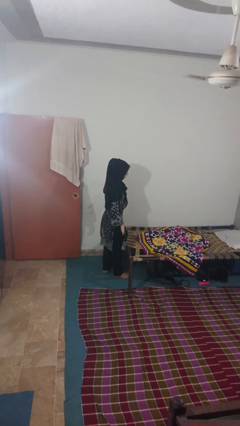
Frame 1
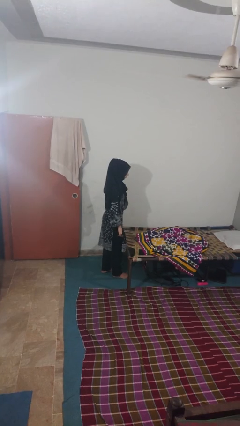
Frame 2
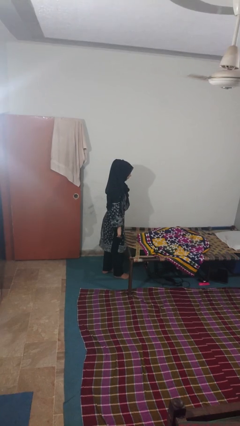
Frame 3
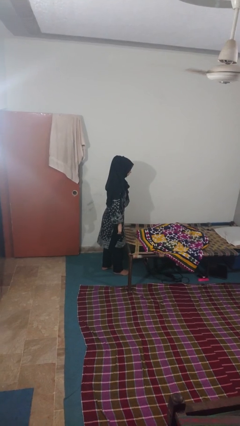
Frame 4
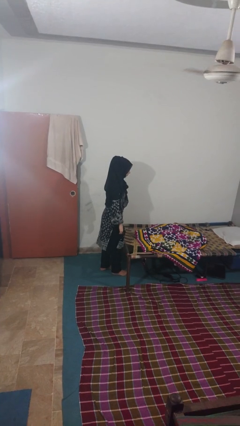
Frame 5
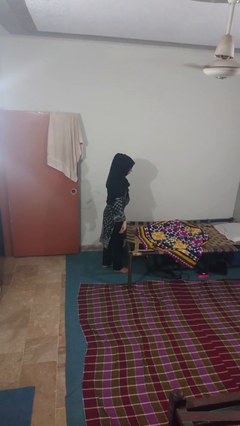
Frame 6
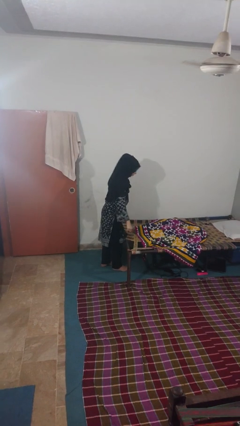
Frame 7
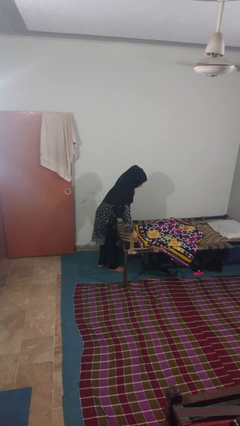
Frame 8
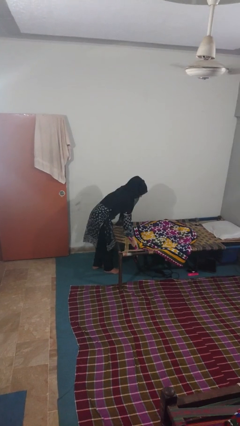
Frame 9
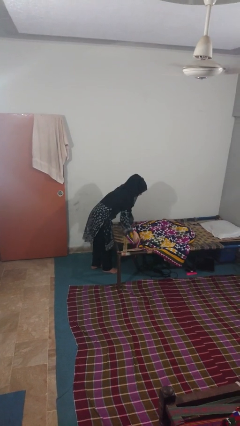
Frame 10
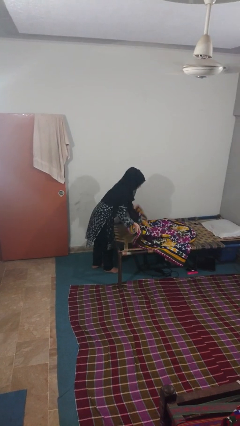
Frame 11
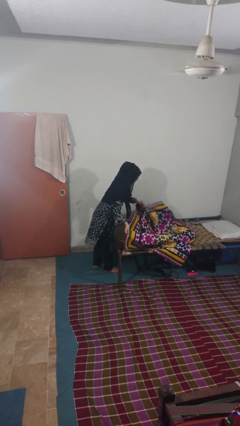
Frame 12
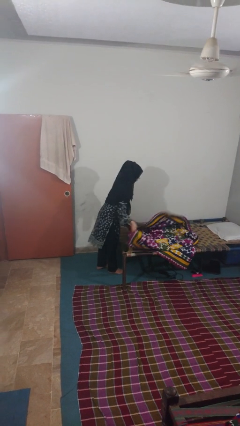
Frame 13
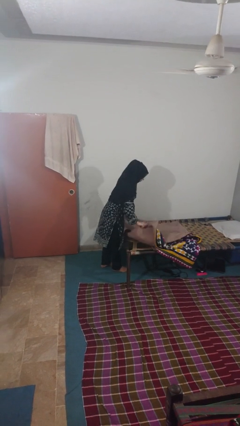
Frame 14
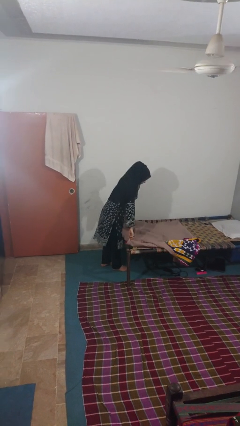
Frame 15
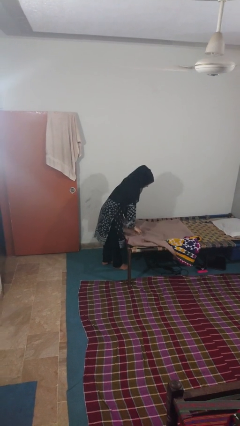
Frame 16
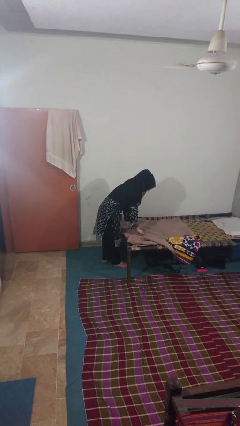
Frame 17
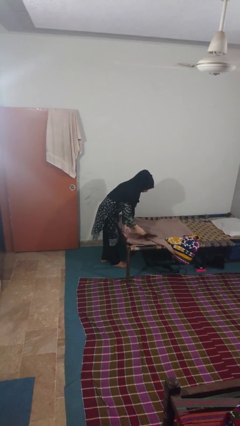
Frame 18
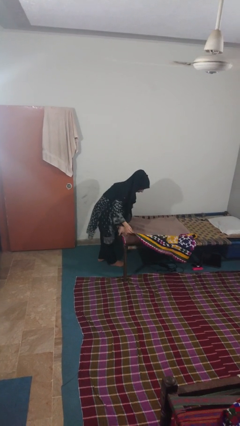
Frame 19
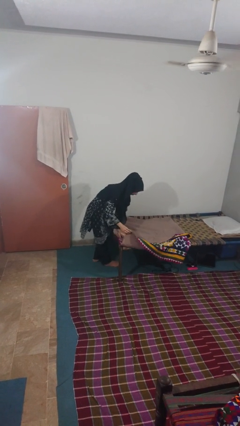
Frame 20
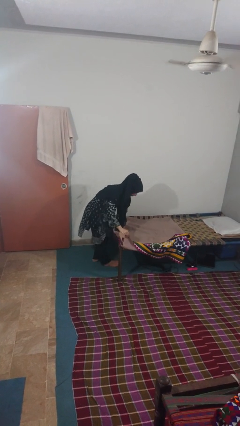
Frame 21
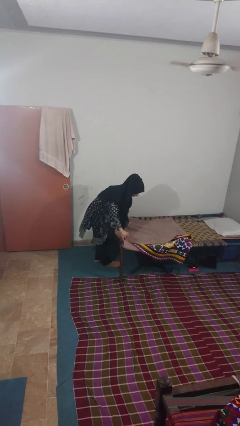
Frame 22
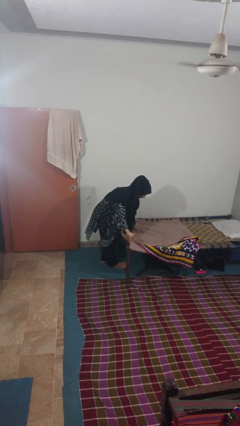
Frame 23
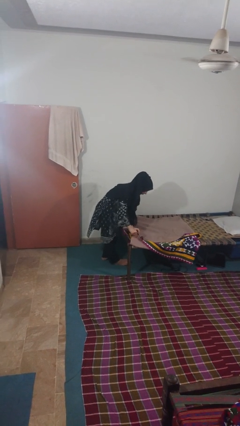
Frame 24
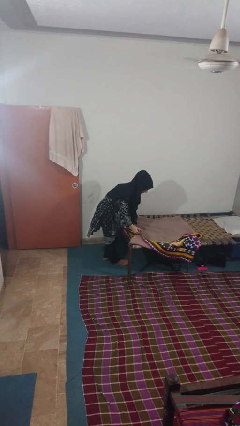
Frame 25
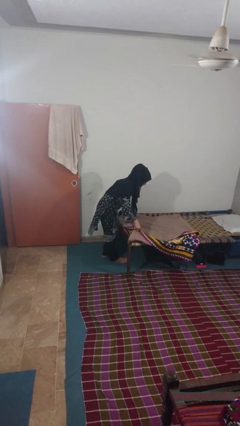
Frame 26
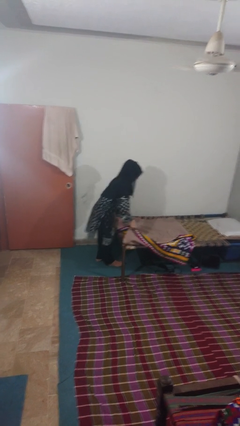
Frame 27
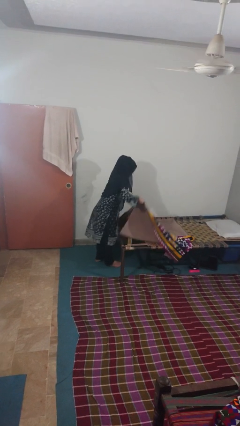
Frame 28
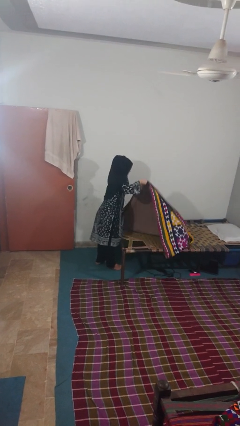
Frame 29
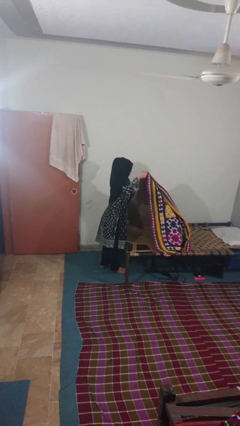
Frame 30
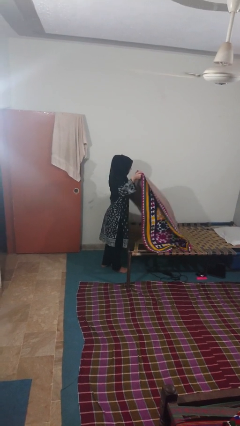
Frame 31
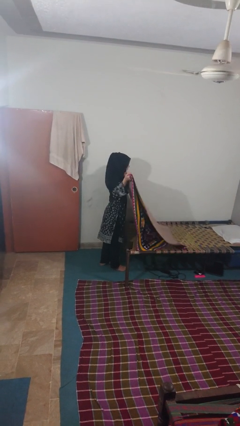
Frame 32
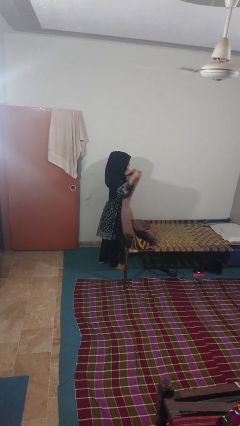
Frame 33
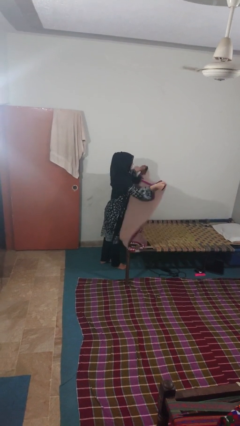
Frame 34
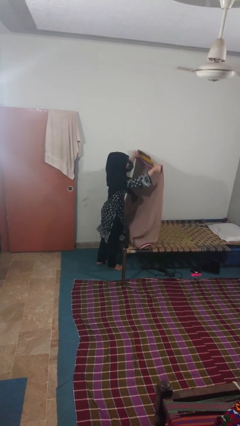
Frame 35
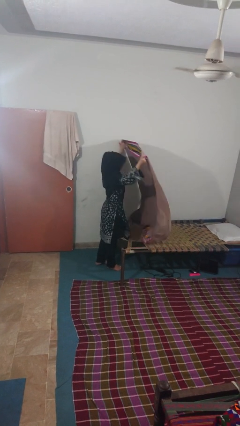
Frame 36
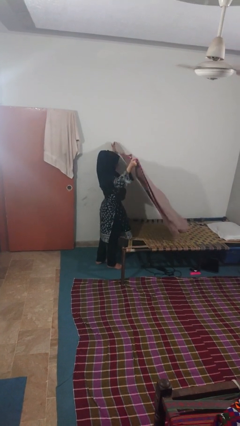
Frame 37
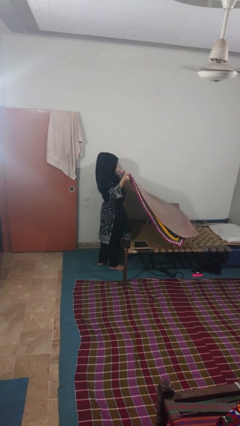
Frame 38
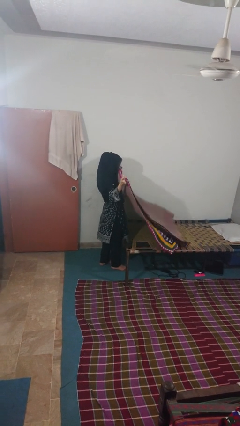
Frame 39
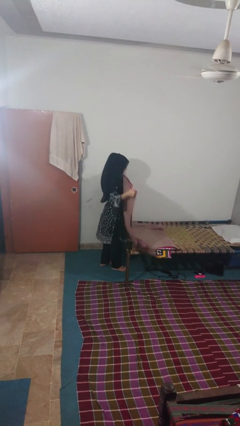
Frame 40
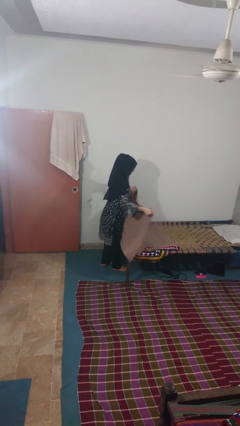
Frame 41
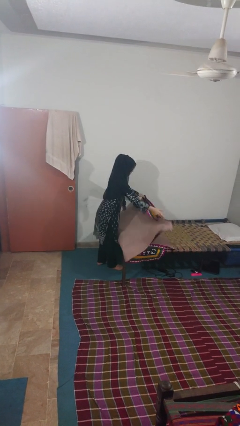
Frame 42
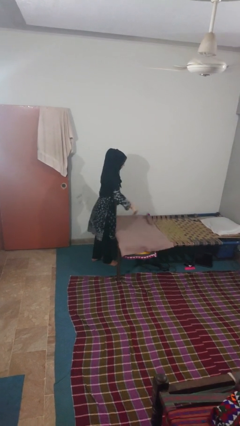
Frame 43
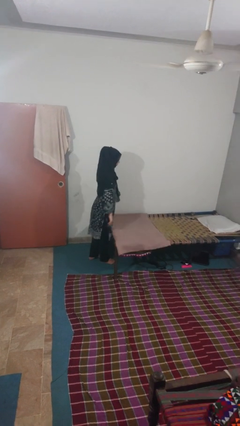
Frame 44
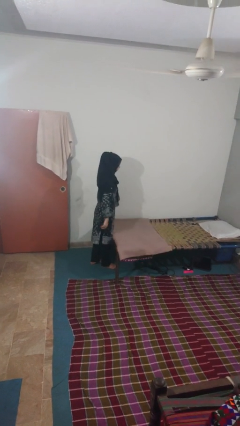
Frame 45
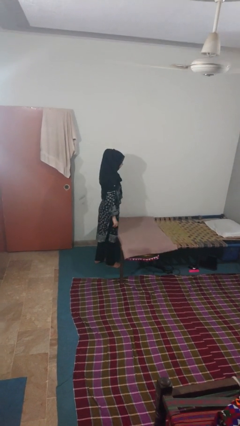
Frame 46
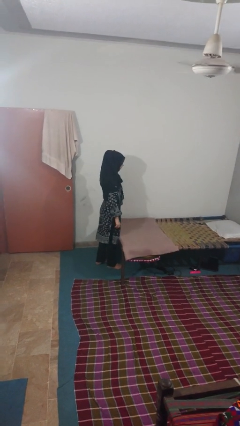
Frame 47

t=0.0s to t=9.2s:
person folds blanket

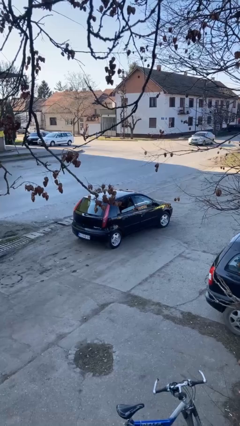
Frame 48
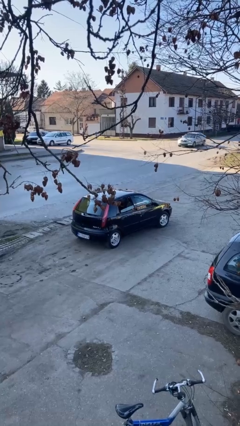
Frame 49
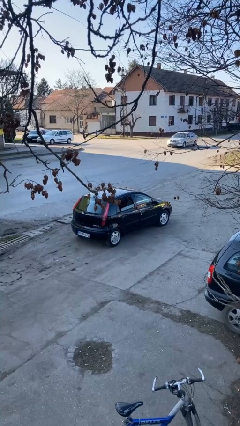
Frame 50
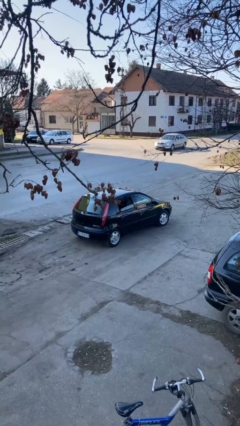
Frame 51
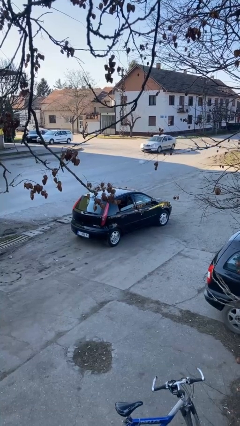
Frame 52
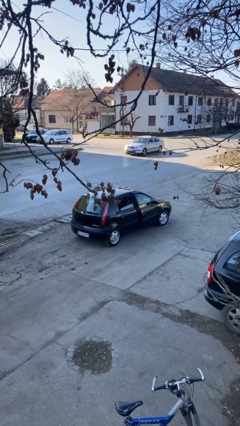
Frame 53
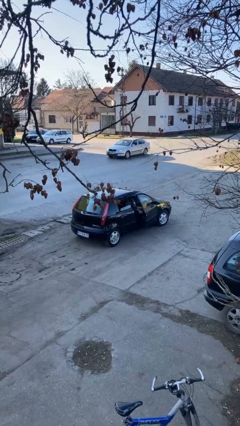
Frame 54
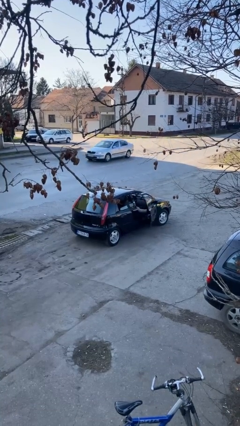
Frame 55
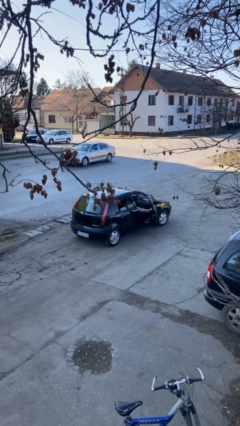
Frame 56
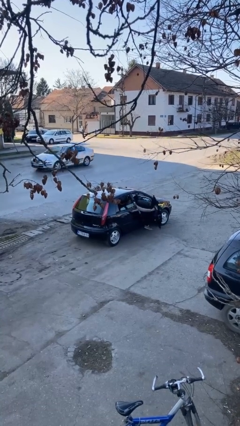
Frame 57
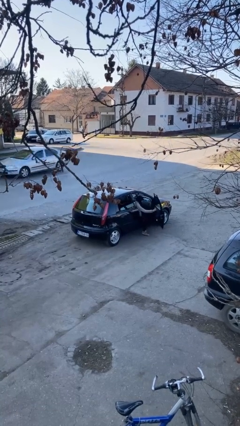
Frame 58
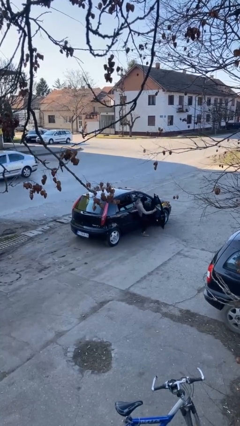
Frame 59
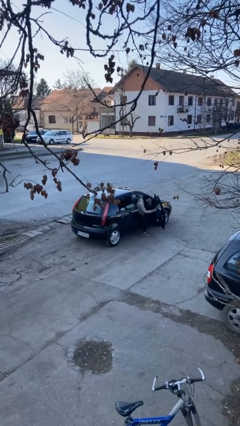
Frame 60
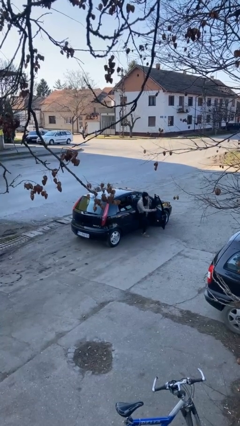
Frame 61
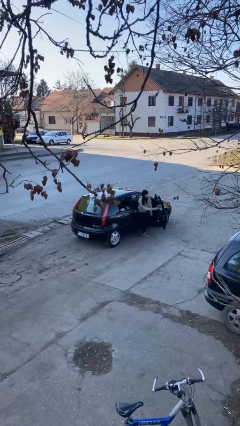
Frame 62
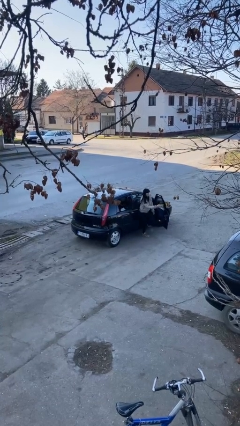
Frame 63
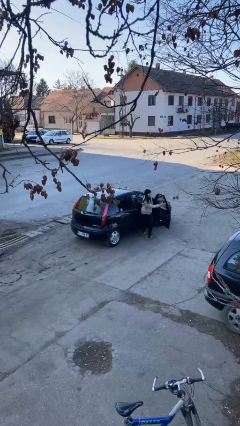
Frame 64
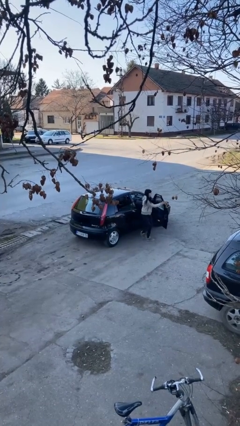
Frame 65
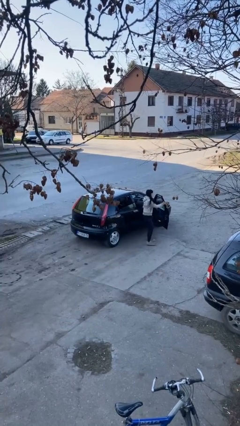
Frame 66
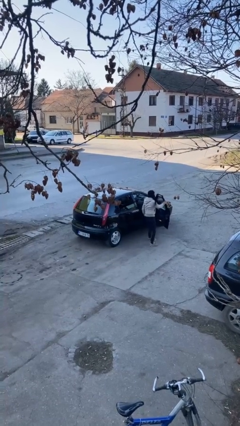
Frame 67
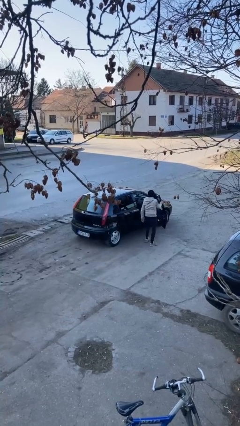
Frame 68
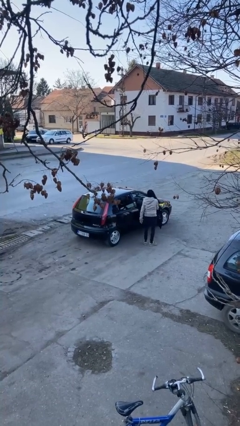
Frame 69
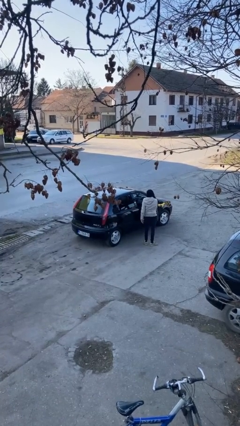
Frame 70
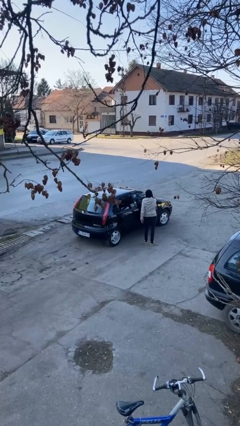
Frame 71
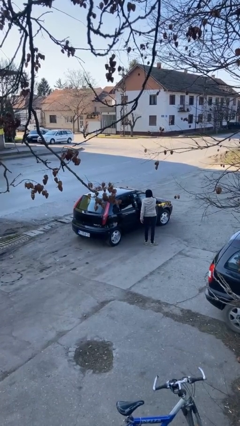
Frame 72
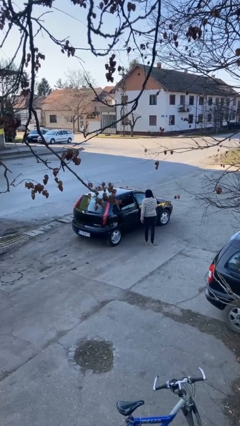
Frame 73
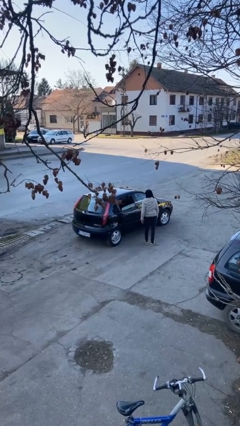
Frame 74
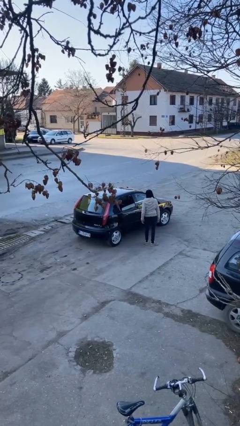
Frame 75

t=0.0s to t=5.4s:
car drops off person

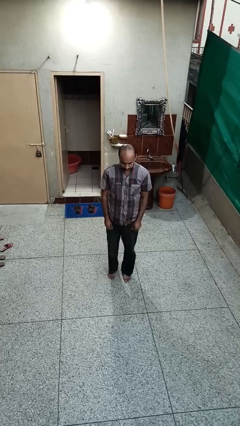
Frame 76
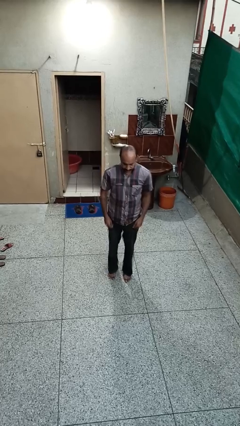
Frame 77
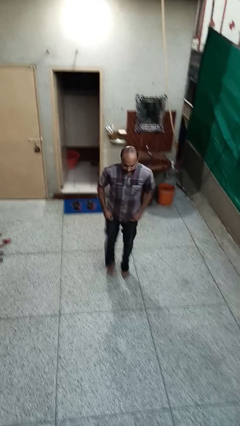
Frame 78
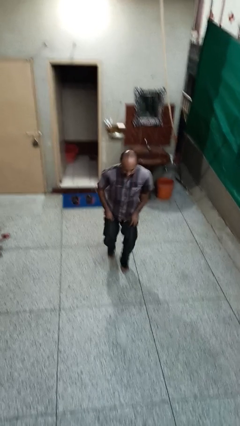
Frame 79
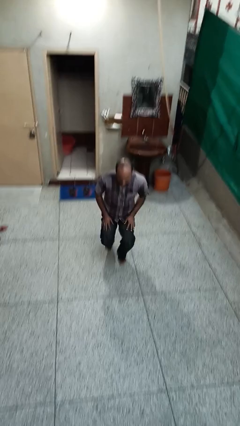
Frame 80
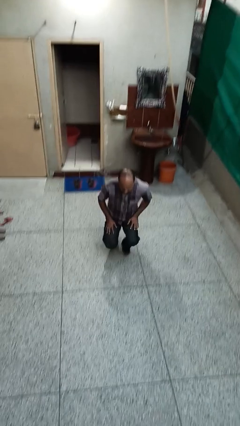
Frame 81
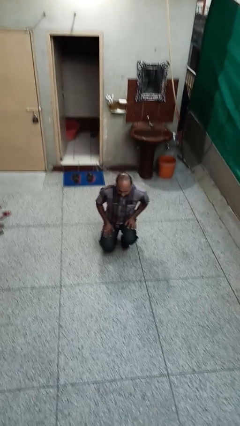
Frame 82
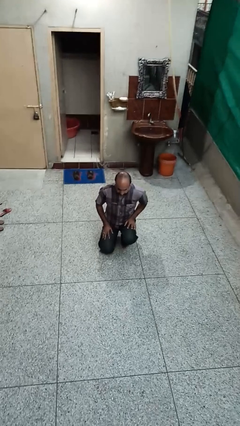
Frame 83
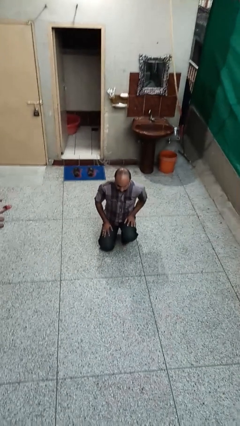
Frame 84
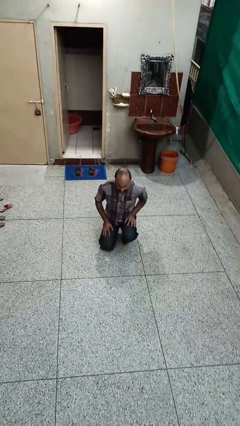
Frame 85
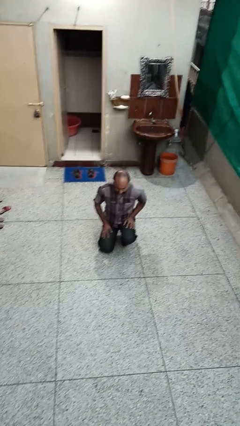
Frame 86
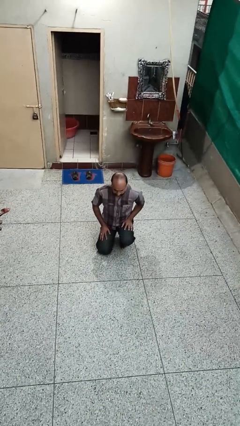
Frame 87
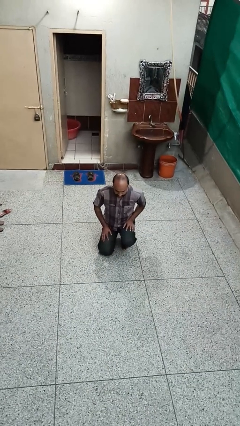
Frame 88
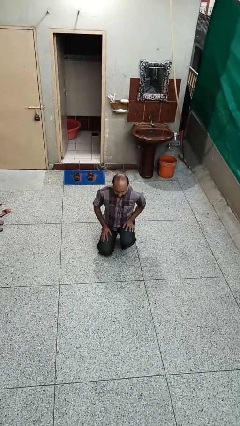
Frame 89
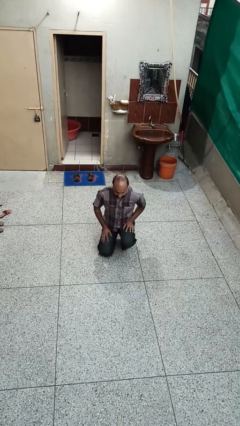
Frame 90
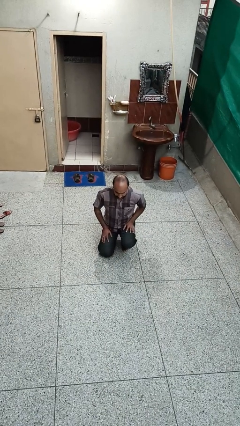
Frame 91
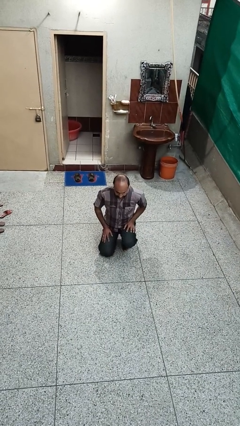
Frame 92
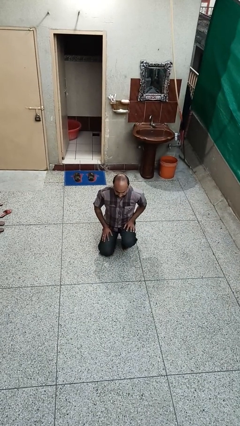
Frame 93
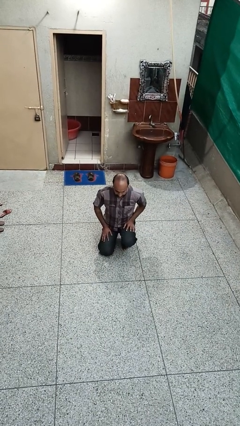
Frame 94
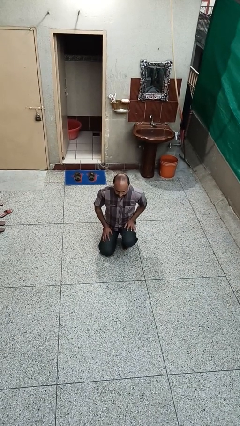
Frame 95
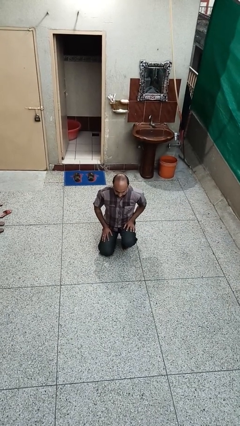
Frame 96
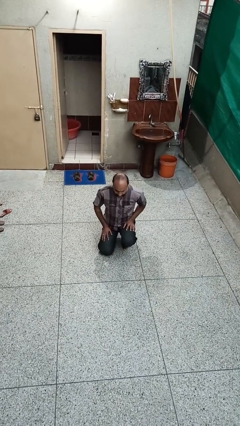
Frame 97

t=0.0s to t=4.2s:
person kneels
